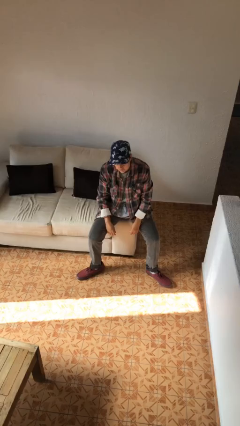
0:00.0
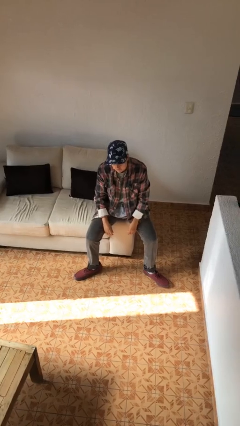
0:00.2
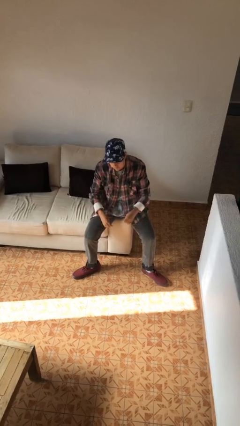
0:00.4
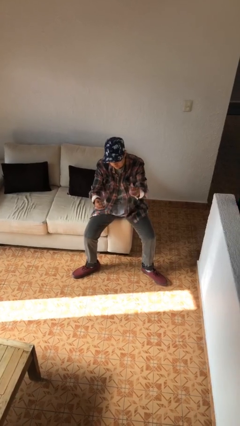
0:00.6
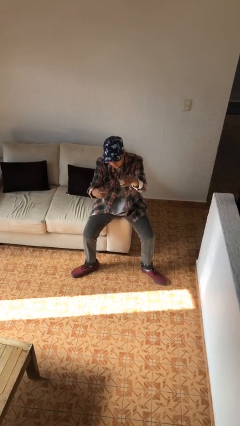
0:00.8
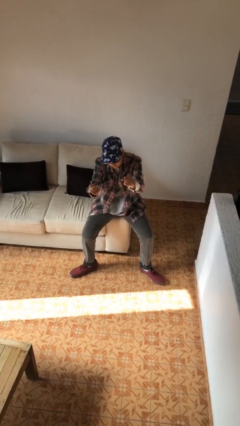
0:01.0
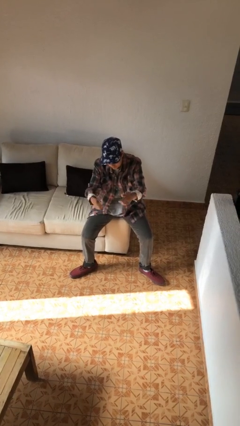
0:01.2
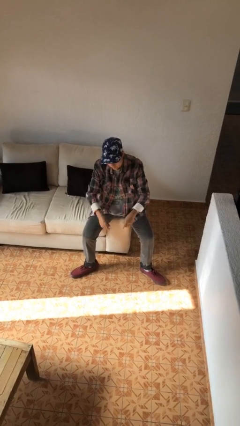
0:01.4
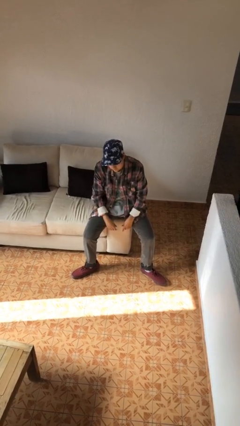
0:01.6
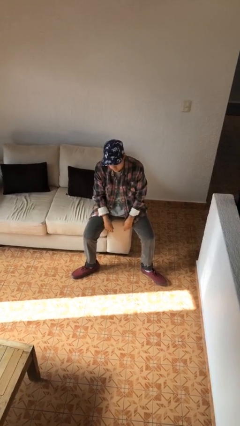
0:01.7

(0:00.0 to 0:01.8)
person snaps fingers

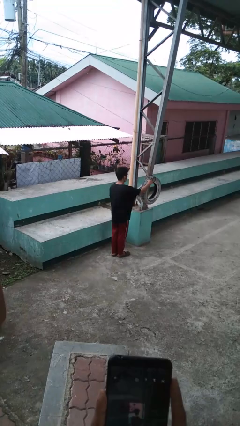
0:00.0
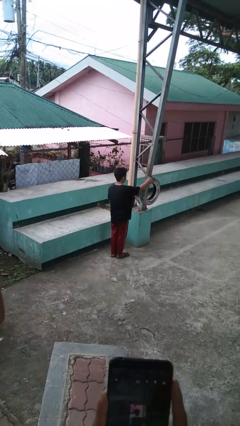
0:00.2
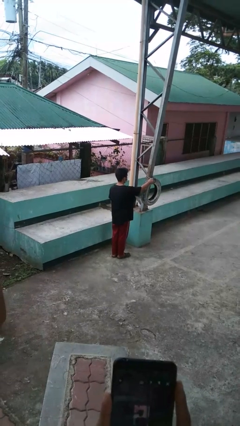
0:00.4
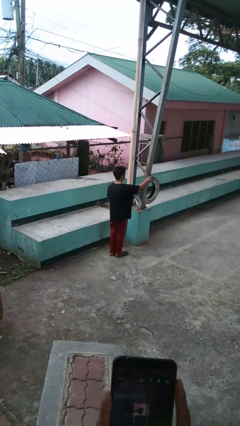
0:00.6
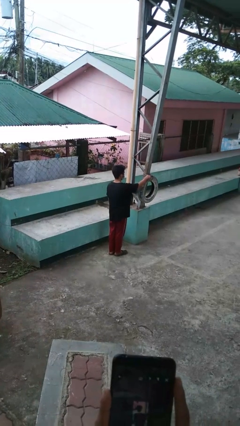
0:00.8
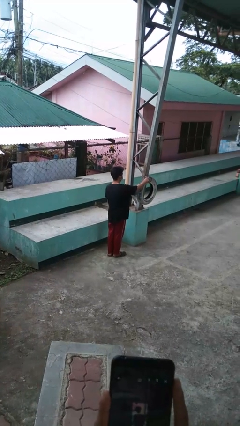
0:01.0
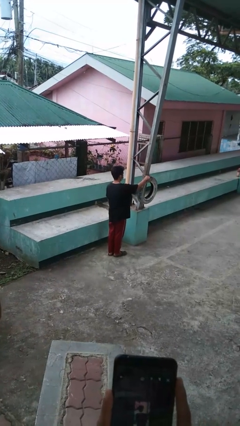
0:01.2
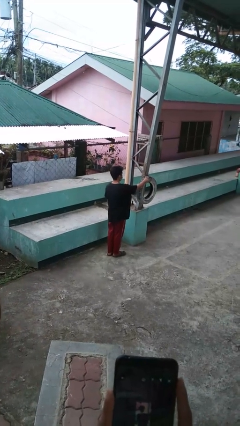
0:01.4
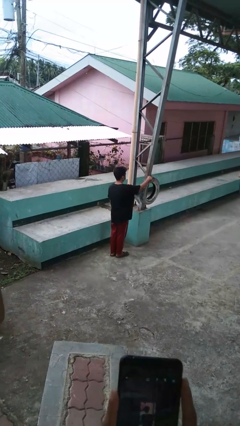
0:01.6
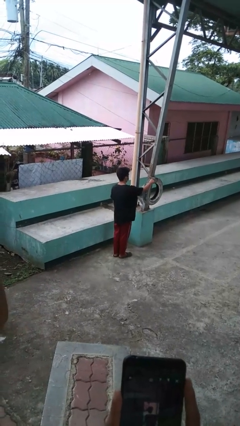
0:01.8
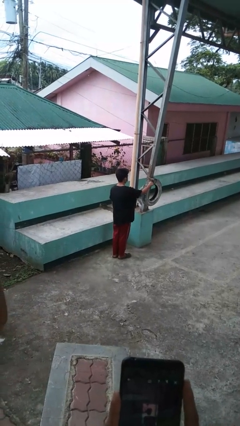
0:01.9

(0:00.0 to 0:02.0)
person taps object with finger

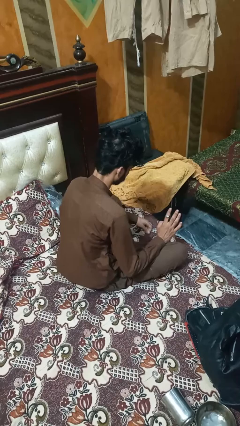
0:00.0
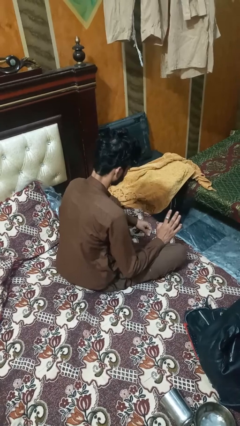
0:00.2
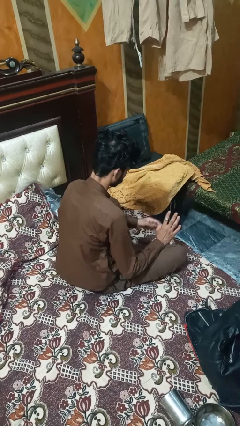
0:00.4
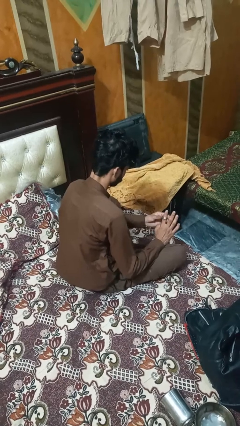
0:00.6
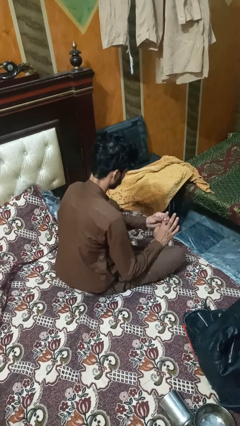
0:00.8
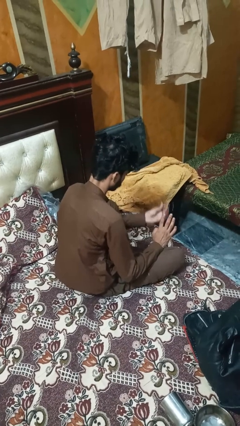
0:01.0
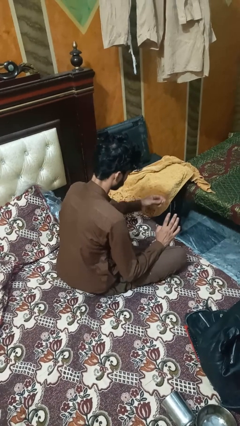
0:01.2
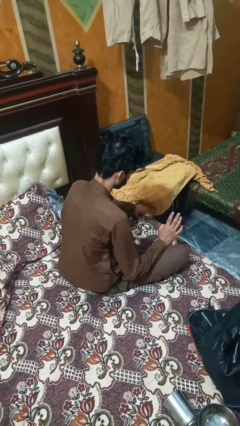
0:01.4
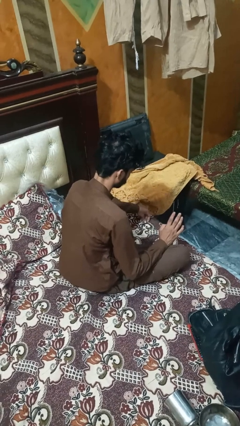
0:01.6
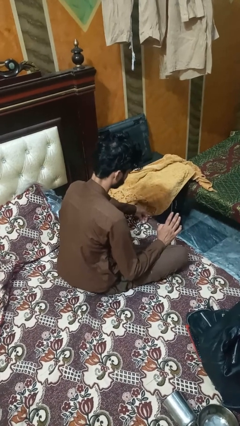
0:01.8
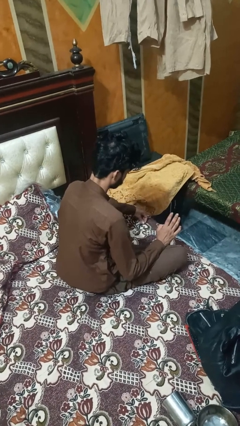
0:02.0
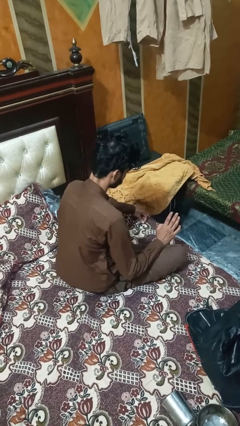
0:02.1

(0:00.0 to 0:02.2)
person takes off ring

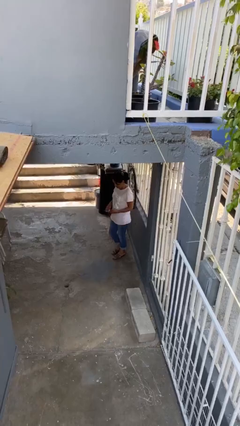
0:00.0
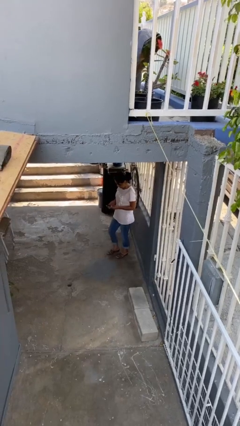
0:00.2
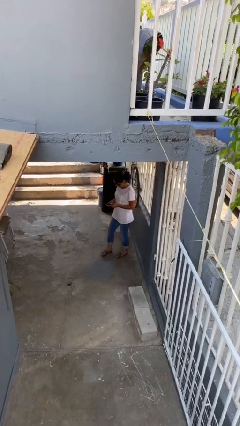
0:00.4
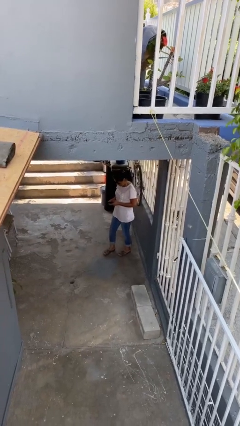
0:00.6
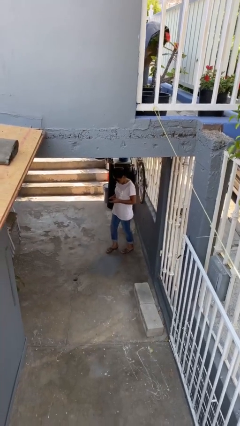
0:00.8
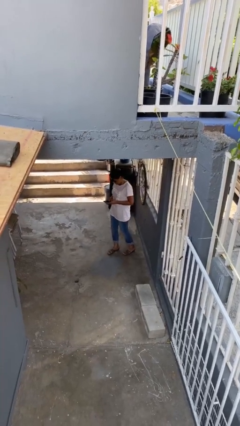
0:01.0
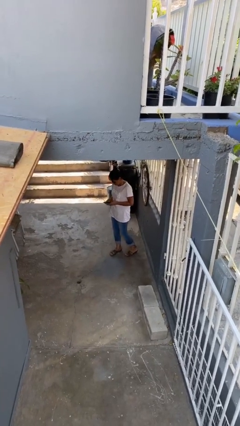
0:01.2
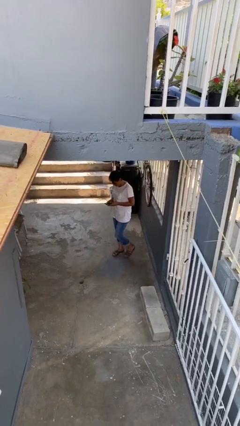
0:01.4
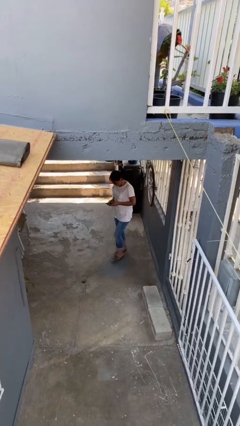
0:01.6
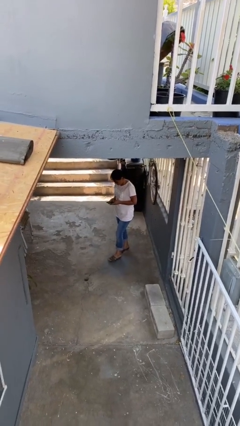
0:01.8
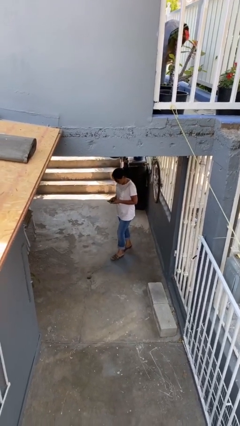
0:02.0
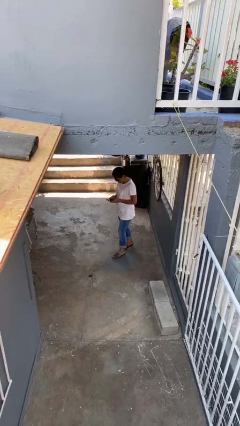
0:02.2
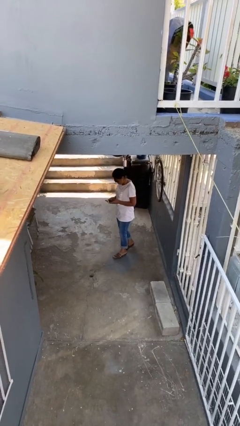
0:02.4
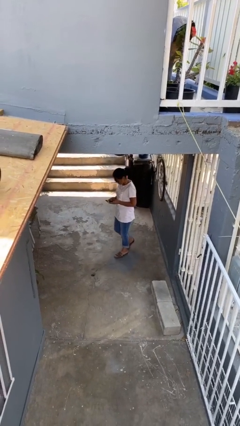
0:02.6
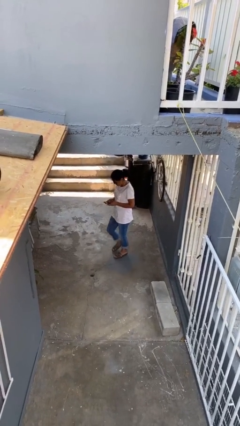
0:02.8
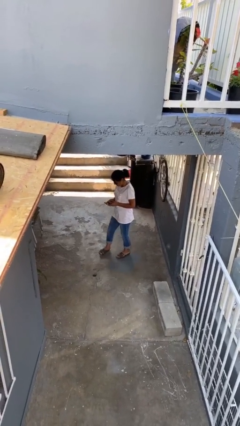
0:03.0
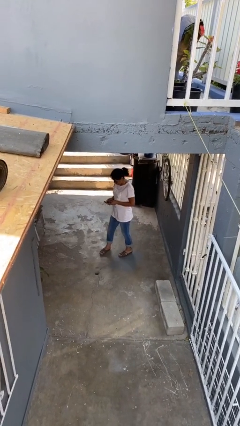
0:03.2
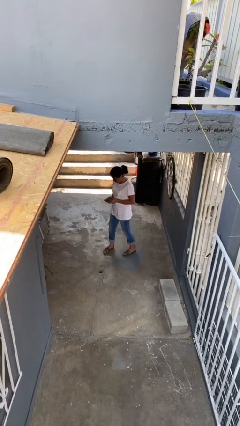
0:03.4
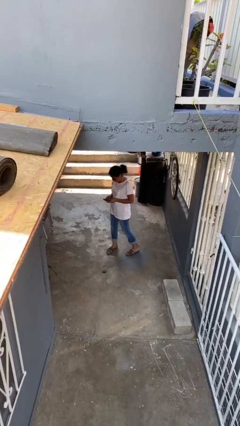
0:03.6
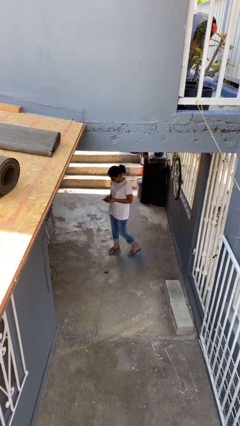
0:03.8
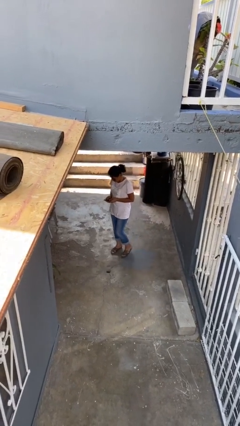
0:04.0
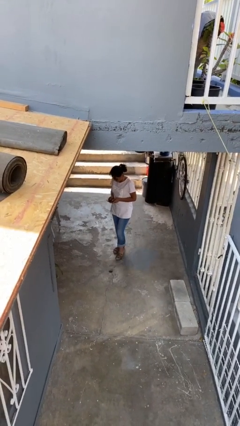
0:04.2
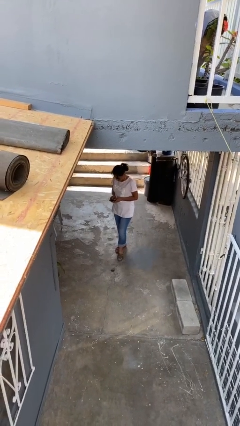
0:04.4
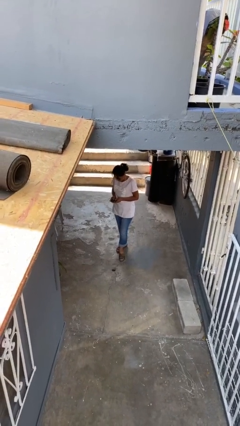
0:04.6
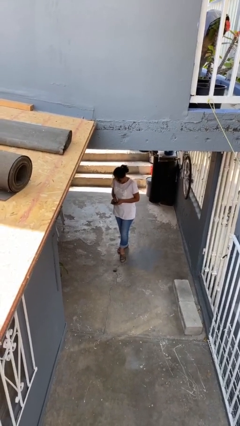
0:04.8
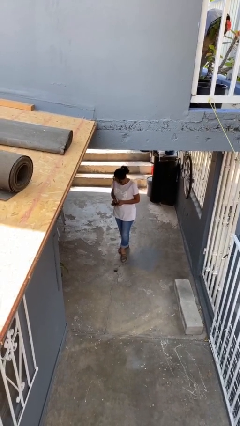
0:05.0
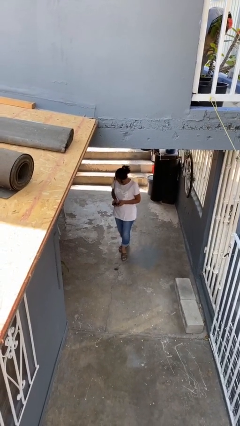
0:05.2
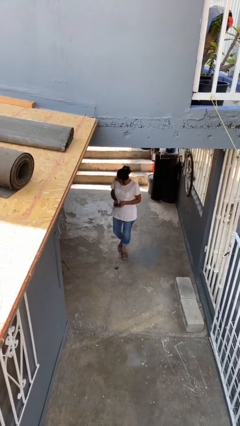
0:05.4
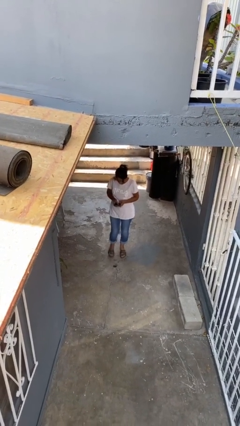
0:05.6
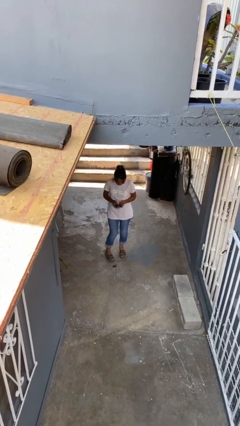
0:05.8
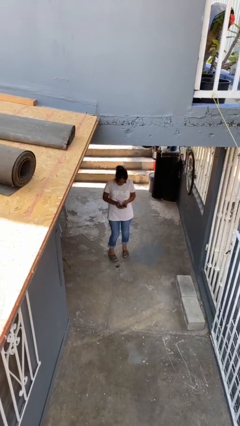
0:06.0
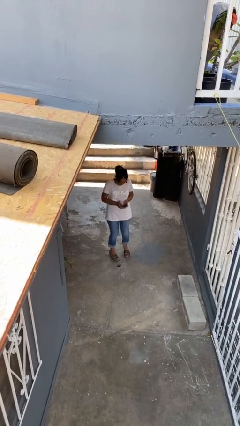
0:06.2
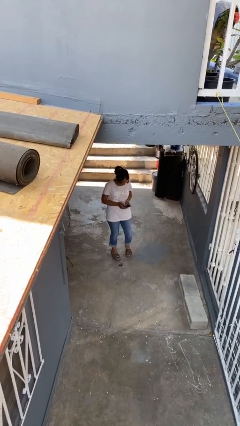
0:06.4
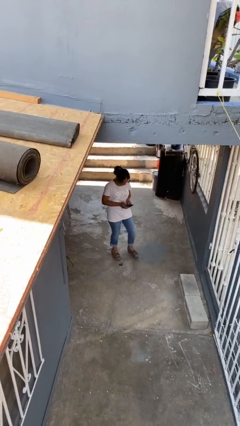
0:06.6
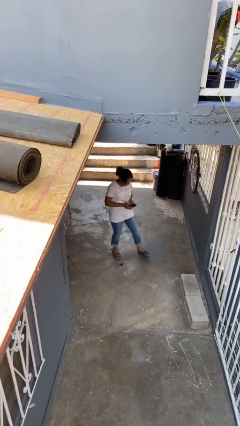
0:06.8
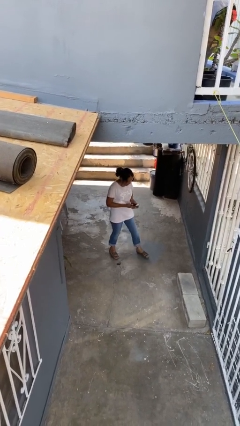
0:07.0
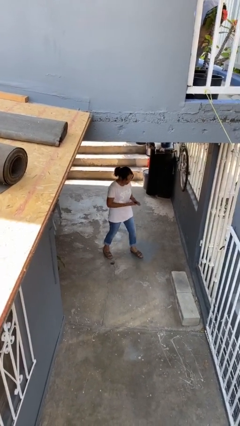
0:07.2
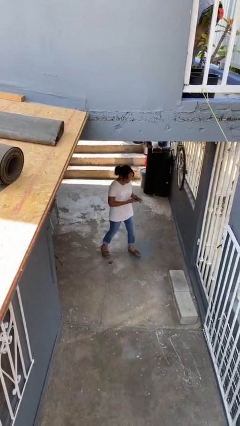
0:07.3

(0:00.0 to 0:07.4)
person texts on phone

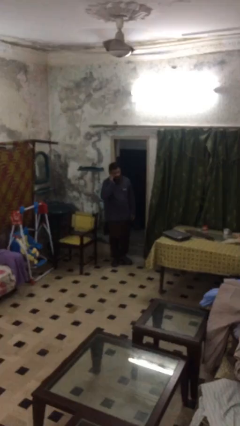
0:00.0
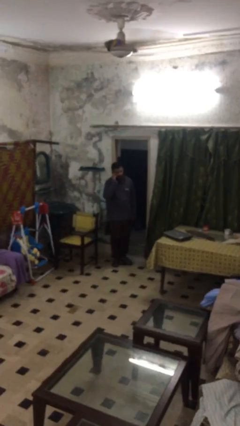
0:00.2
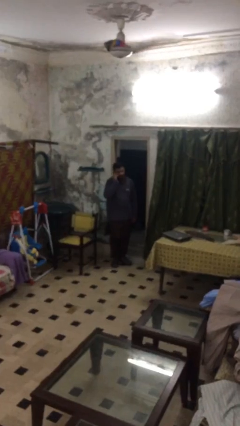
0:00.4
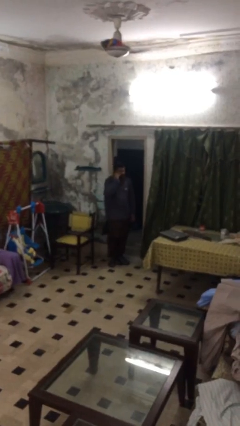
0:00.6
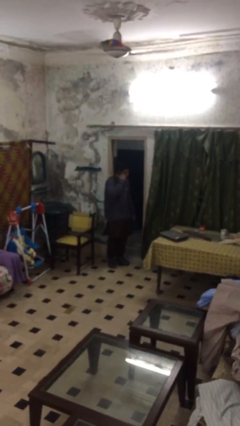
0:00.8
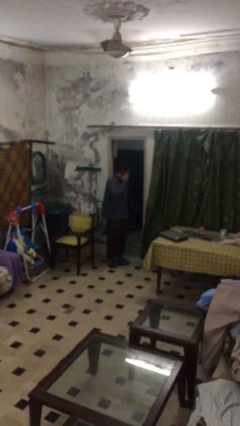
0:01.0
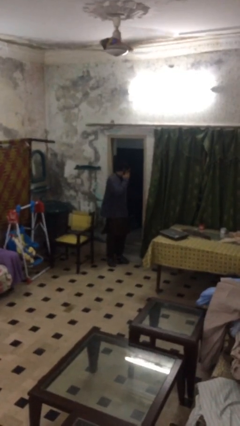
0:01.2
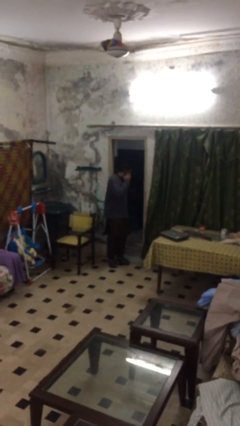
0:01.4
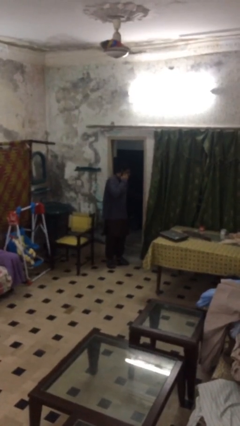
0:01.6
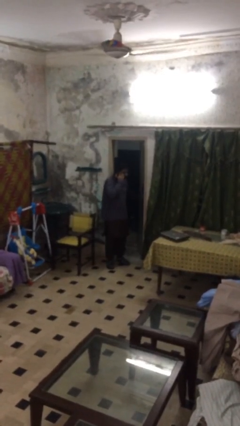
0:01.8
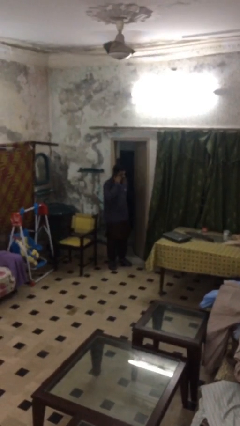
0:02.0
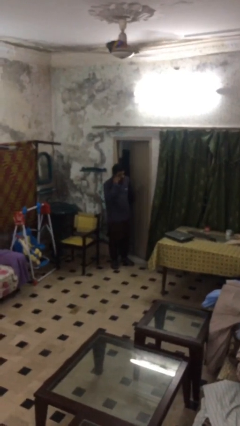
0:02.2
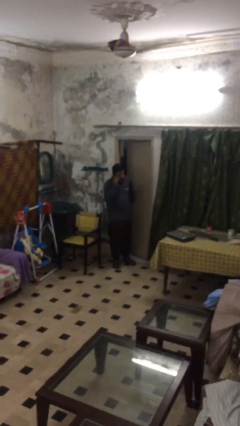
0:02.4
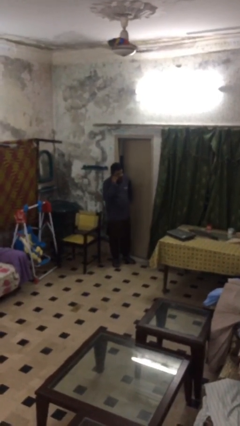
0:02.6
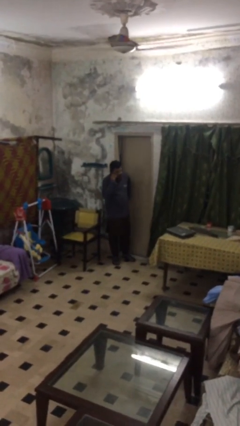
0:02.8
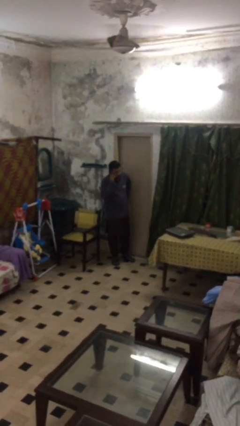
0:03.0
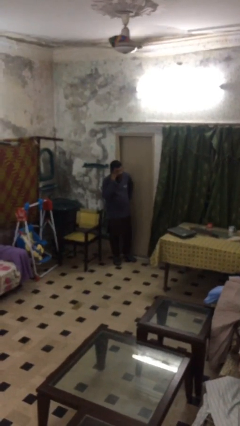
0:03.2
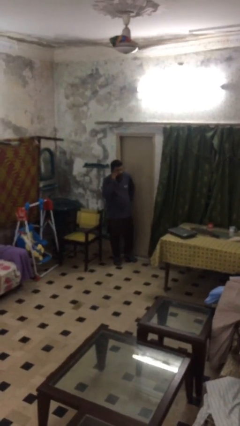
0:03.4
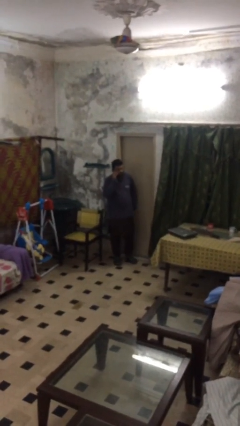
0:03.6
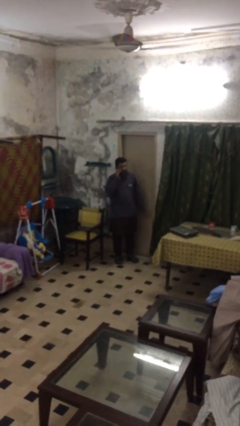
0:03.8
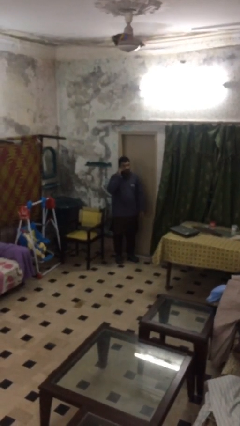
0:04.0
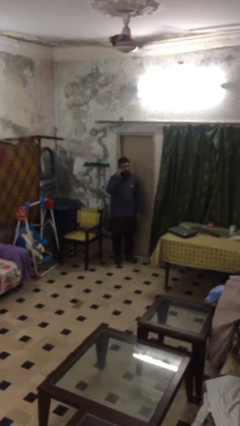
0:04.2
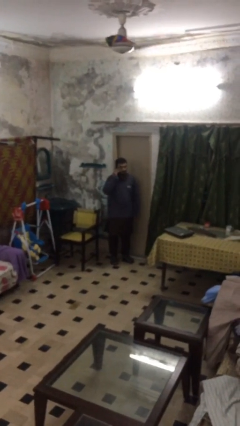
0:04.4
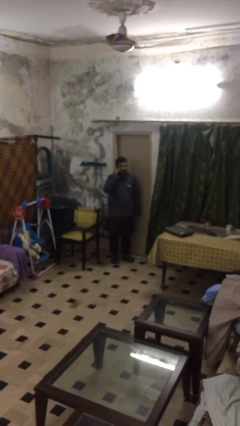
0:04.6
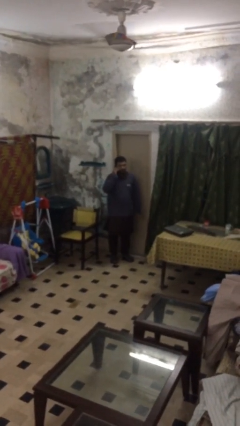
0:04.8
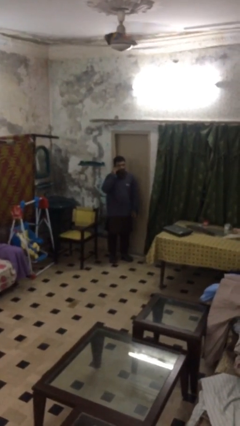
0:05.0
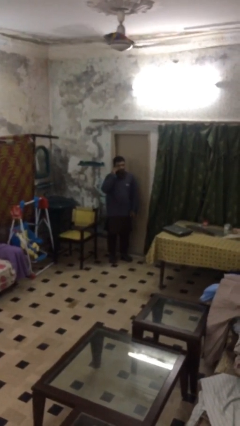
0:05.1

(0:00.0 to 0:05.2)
person closes facility door
